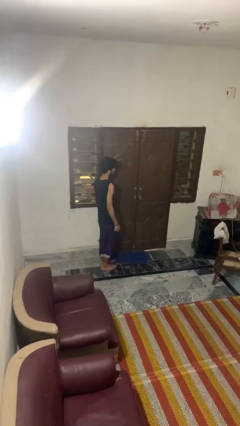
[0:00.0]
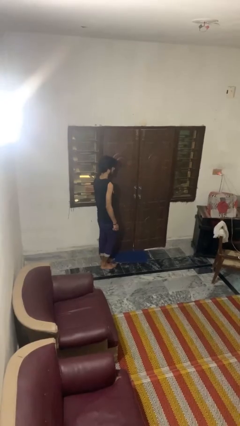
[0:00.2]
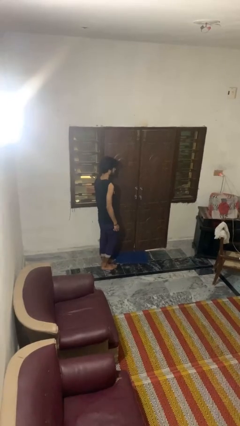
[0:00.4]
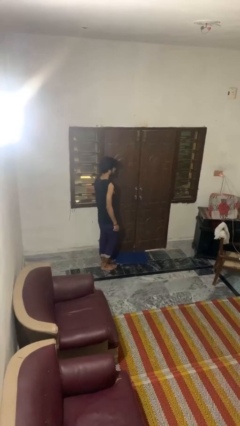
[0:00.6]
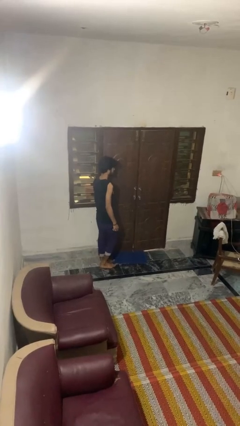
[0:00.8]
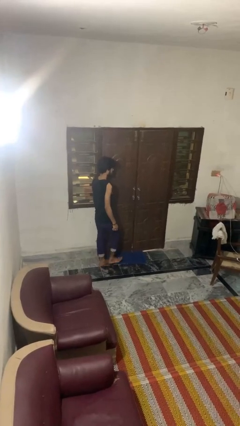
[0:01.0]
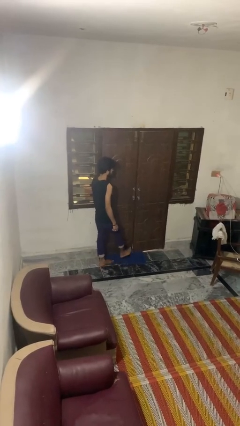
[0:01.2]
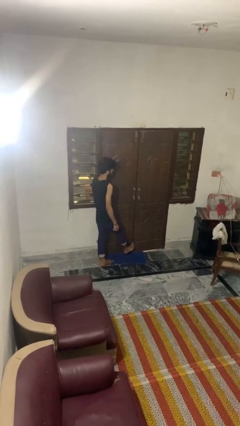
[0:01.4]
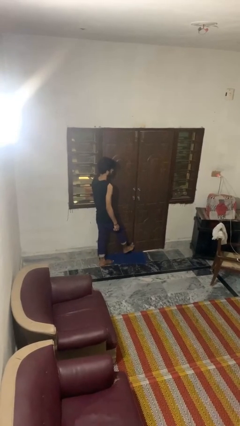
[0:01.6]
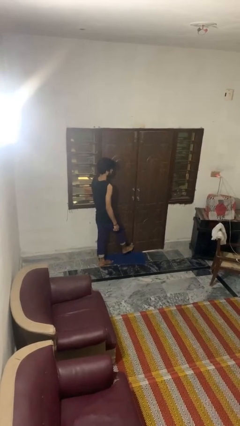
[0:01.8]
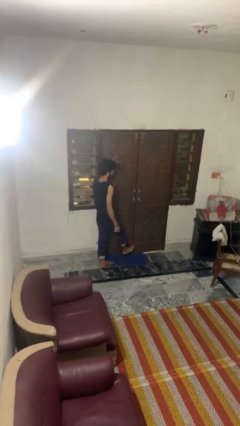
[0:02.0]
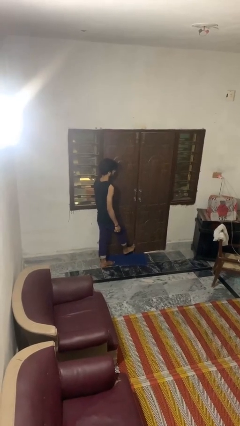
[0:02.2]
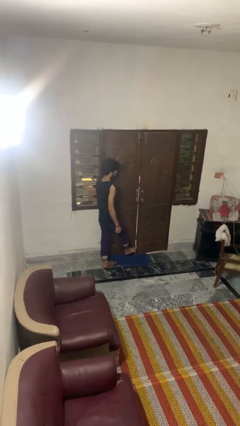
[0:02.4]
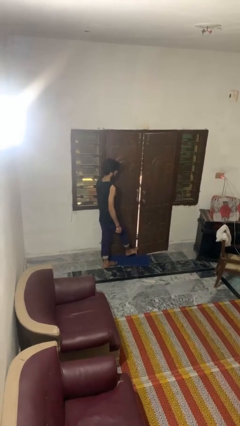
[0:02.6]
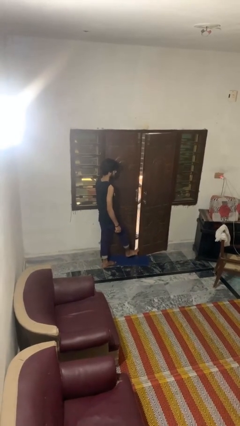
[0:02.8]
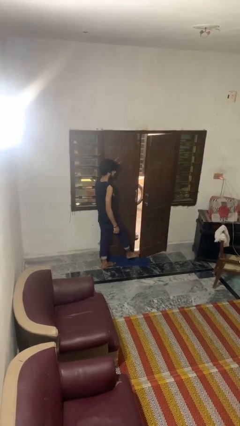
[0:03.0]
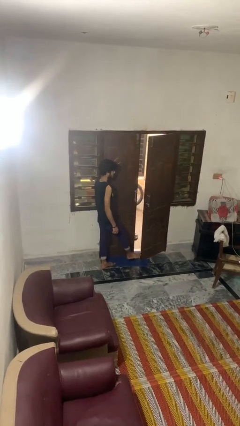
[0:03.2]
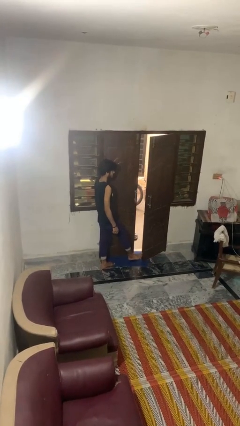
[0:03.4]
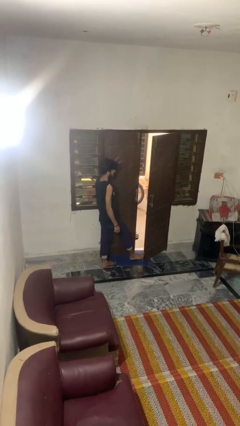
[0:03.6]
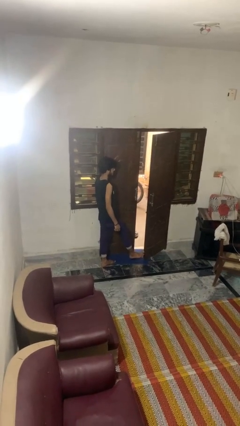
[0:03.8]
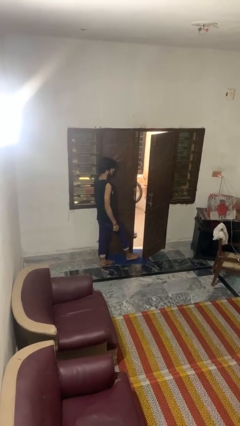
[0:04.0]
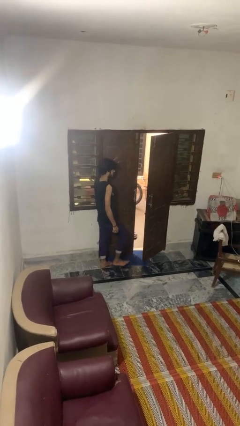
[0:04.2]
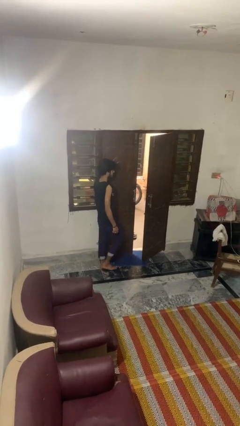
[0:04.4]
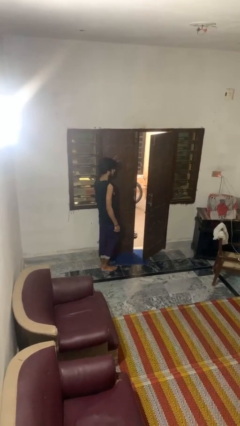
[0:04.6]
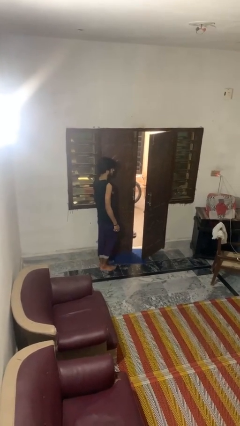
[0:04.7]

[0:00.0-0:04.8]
person opens facility door

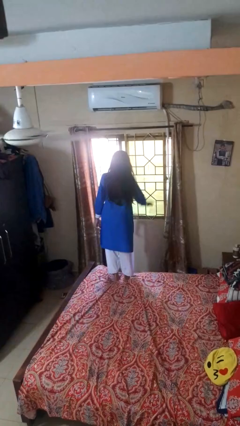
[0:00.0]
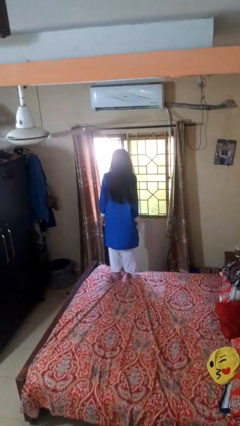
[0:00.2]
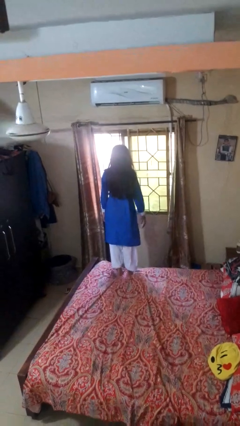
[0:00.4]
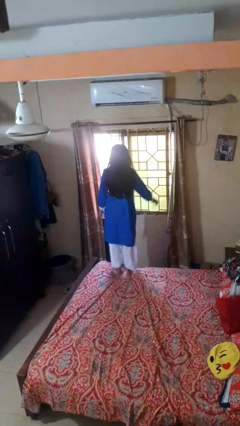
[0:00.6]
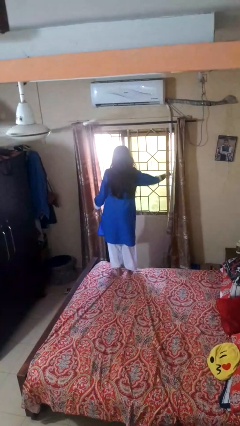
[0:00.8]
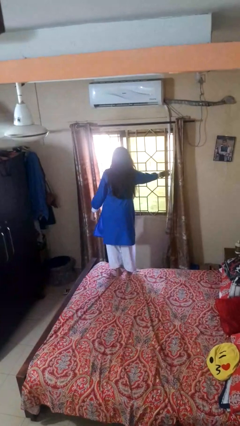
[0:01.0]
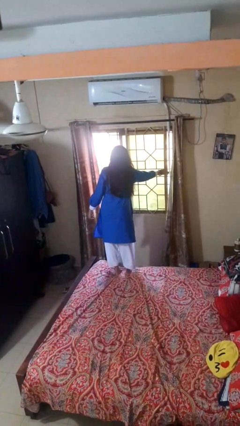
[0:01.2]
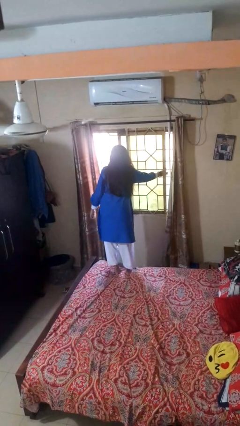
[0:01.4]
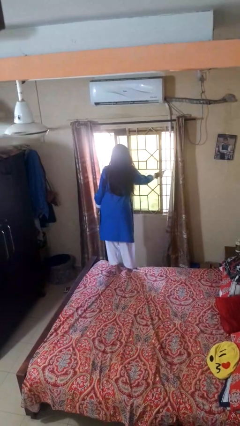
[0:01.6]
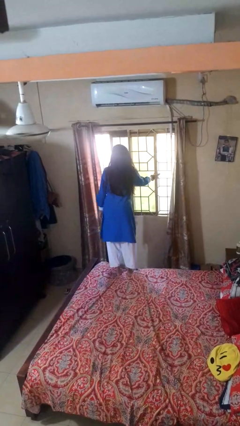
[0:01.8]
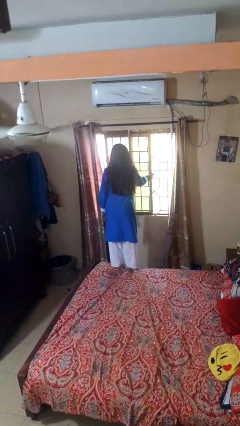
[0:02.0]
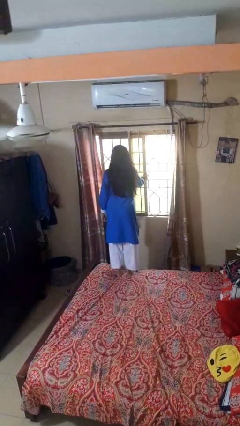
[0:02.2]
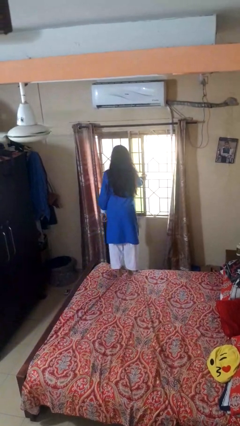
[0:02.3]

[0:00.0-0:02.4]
person closes home window

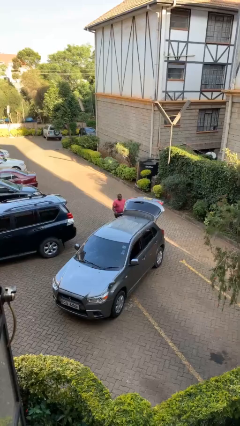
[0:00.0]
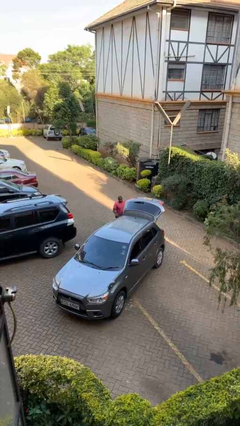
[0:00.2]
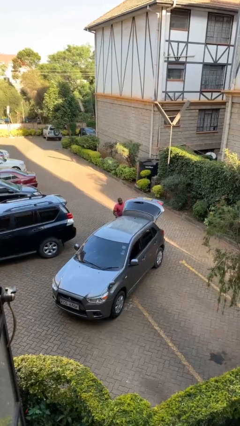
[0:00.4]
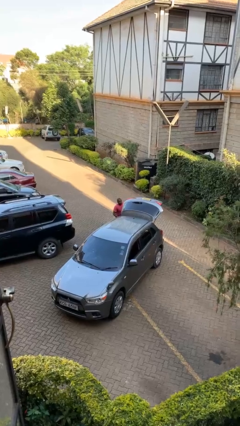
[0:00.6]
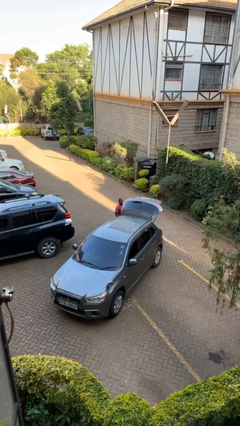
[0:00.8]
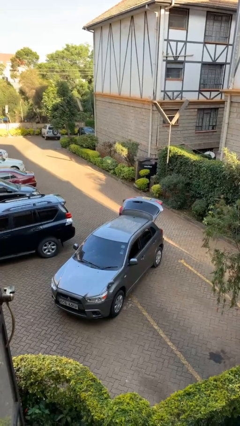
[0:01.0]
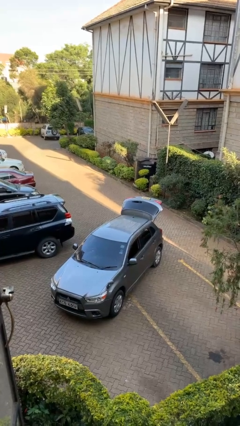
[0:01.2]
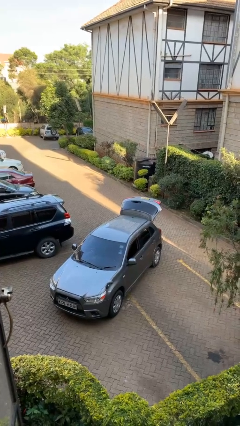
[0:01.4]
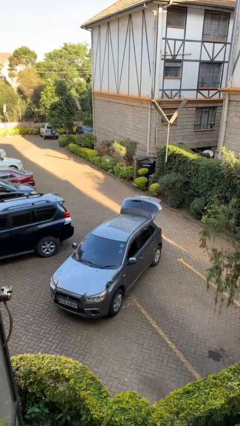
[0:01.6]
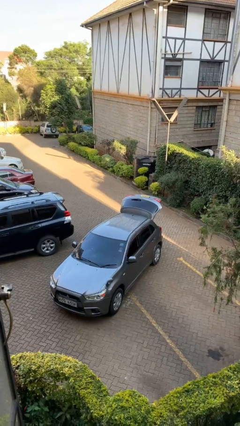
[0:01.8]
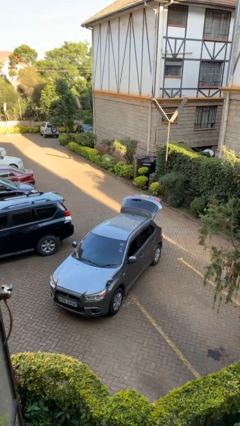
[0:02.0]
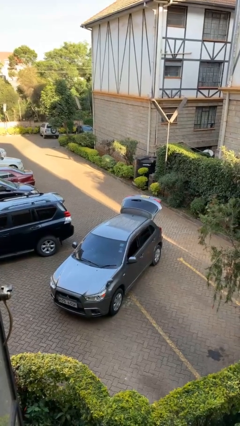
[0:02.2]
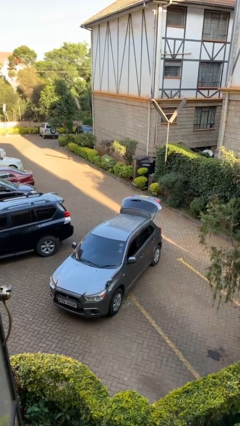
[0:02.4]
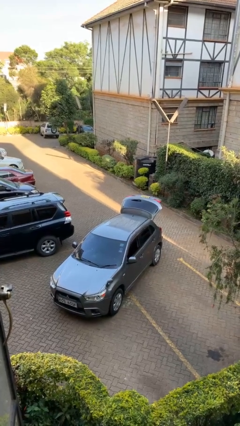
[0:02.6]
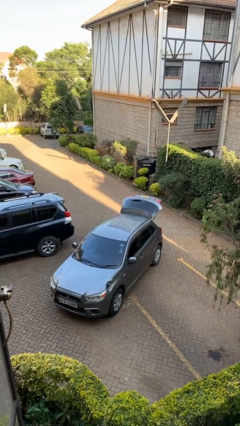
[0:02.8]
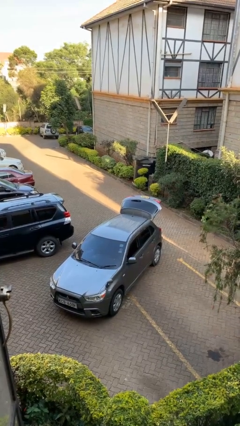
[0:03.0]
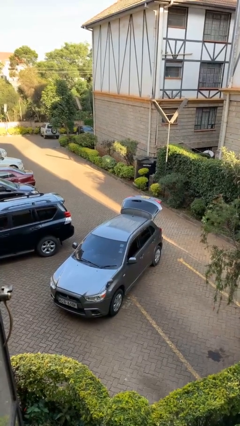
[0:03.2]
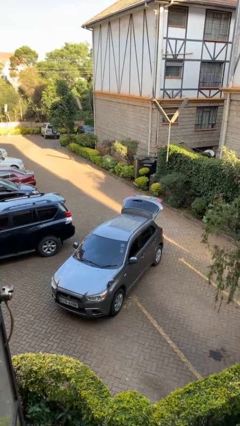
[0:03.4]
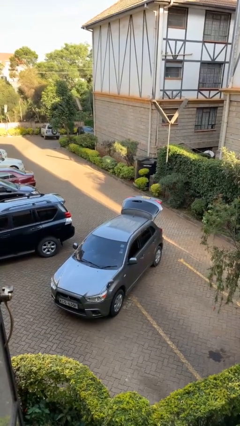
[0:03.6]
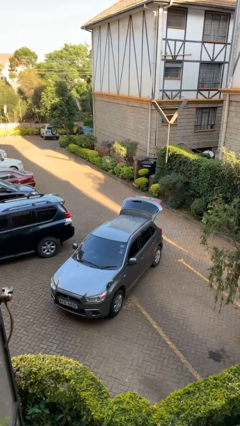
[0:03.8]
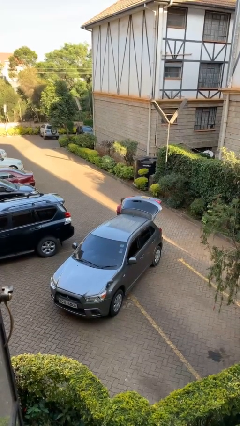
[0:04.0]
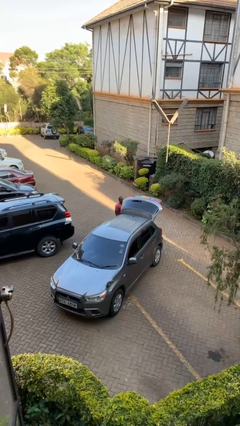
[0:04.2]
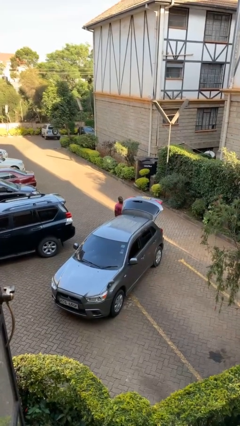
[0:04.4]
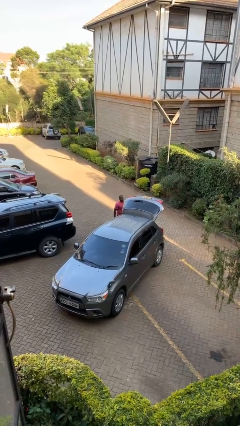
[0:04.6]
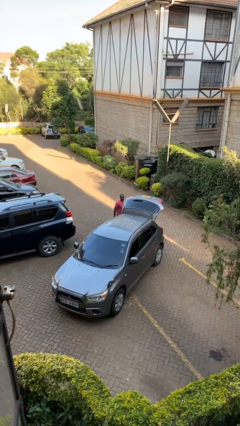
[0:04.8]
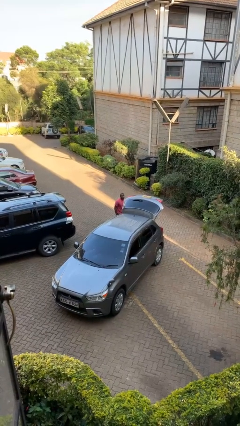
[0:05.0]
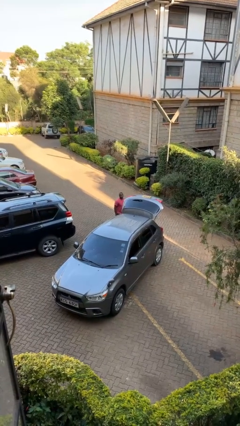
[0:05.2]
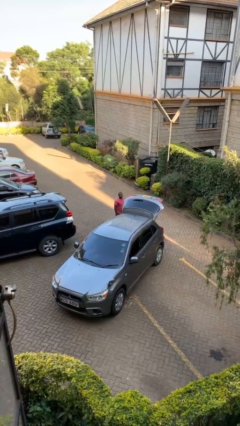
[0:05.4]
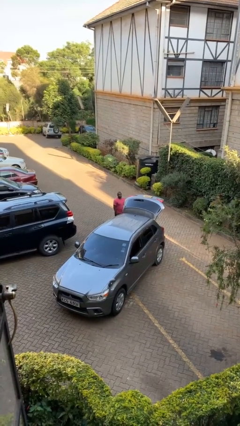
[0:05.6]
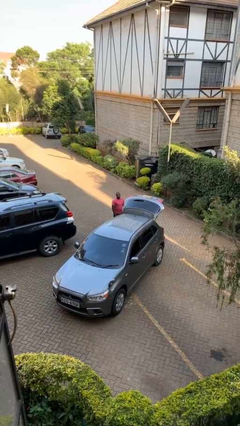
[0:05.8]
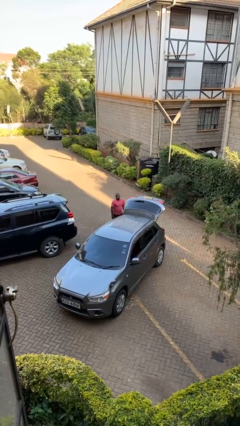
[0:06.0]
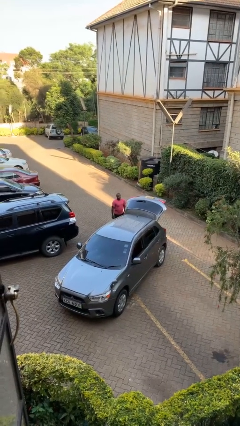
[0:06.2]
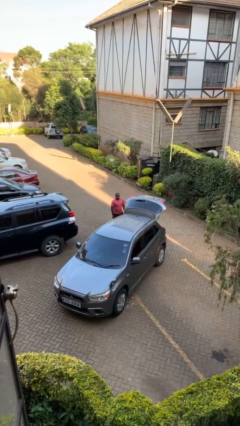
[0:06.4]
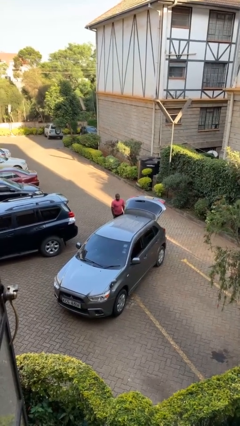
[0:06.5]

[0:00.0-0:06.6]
person loads car

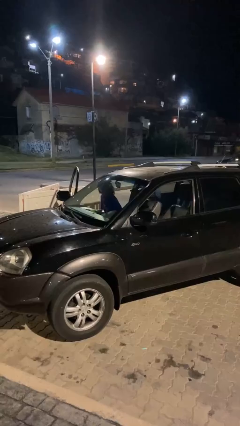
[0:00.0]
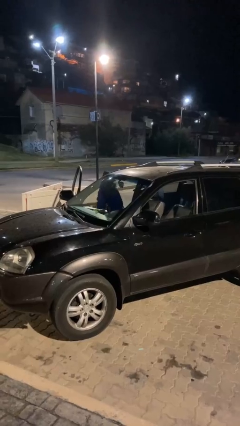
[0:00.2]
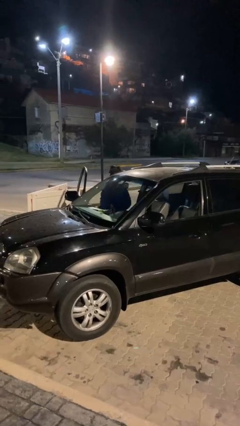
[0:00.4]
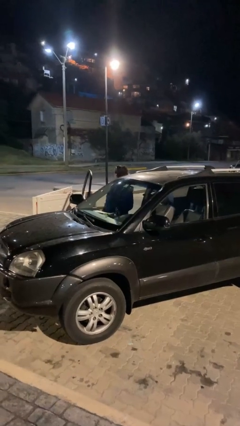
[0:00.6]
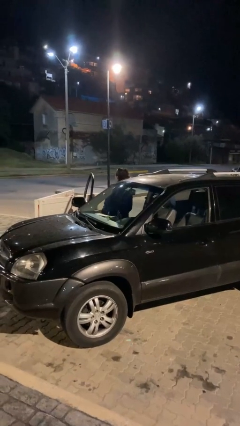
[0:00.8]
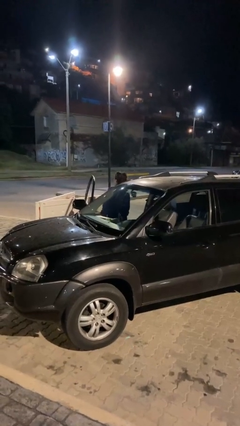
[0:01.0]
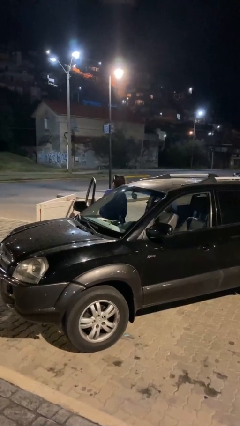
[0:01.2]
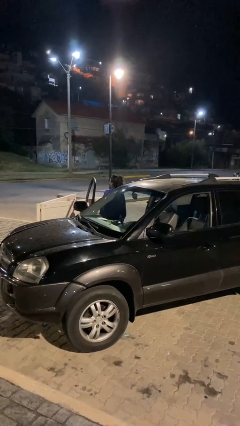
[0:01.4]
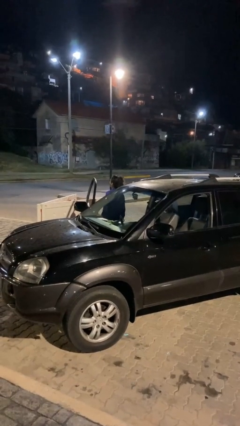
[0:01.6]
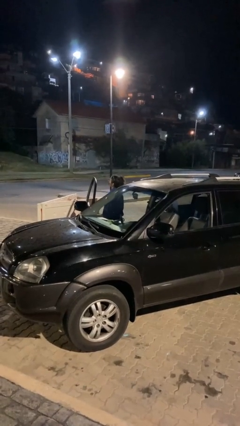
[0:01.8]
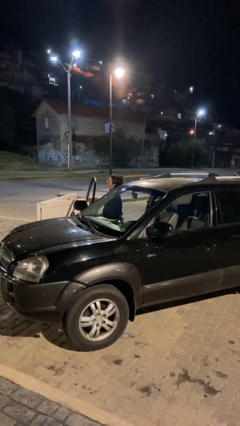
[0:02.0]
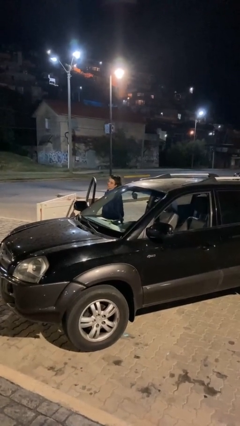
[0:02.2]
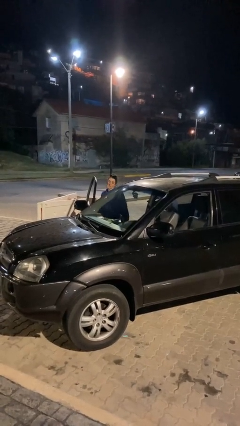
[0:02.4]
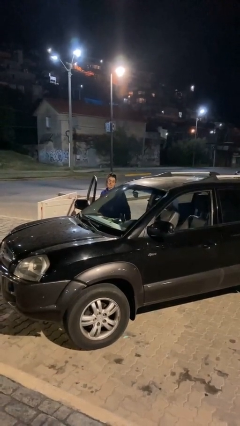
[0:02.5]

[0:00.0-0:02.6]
person exits car

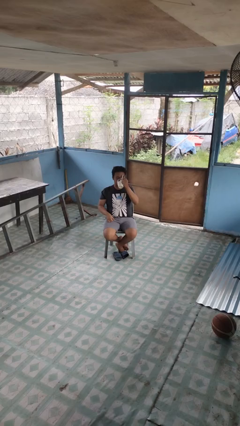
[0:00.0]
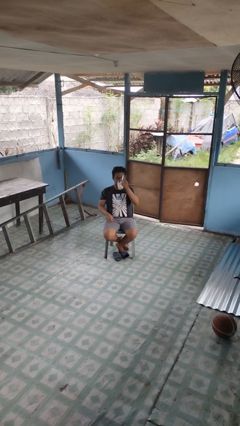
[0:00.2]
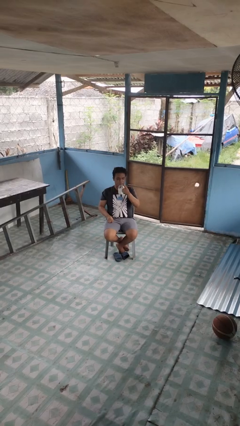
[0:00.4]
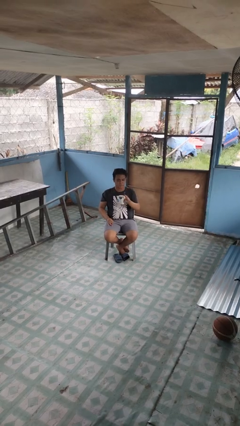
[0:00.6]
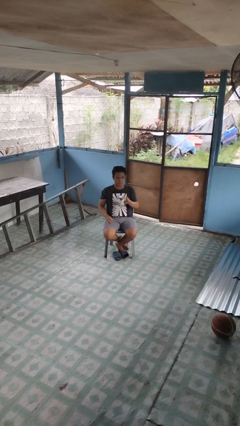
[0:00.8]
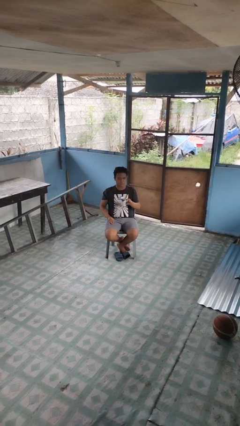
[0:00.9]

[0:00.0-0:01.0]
person drinks from mug

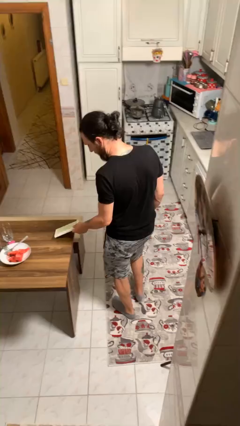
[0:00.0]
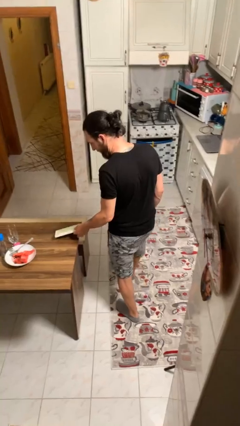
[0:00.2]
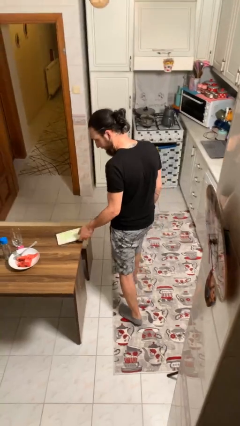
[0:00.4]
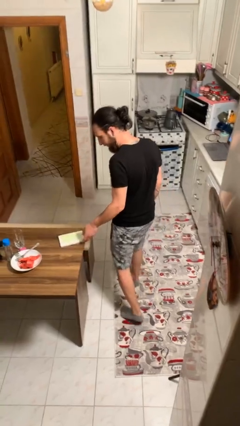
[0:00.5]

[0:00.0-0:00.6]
person puts down object on table
